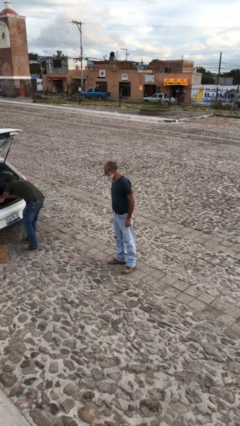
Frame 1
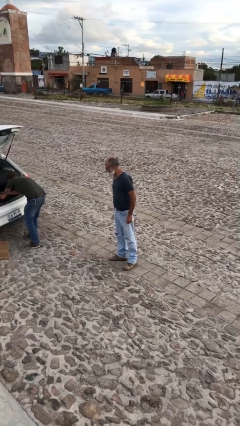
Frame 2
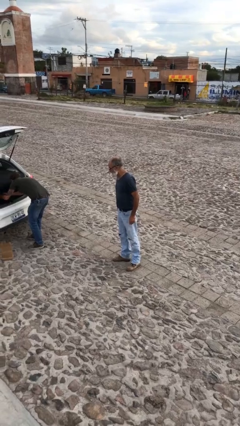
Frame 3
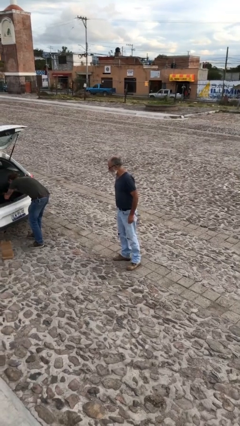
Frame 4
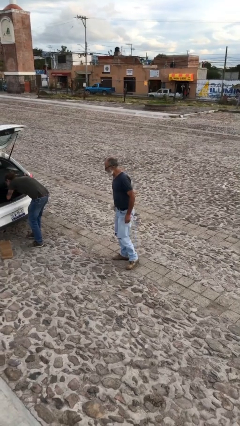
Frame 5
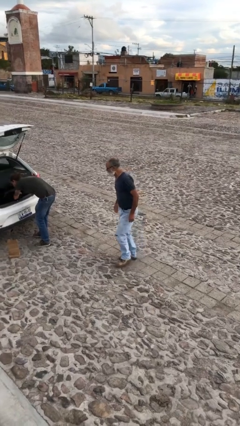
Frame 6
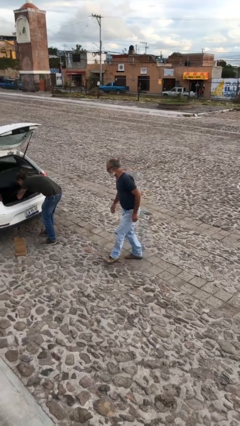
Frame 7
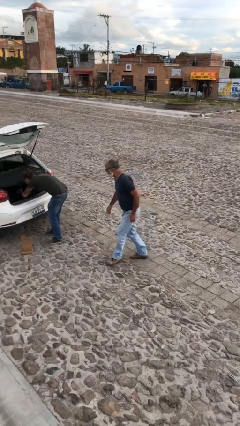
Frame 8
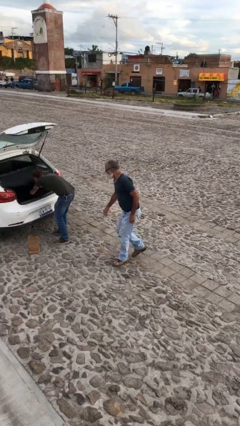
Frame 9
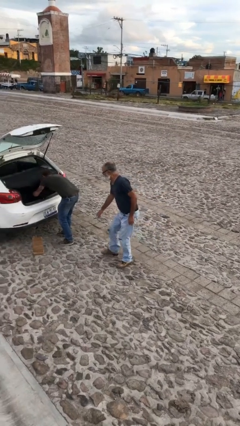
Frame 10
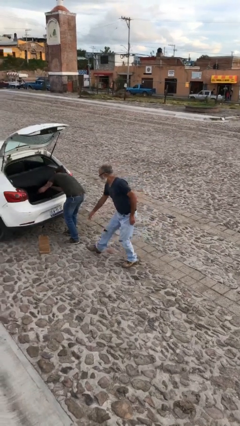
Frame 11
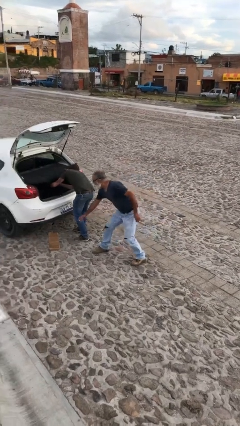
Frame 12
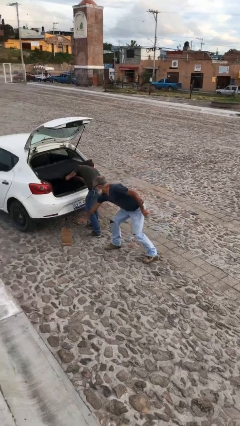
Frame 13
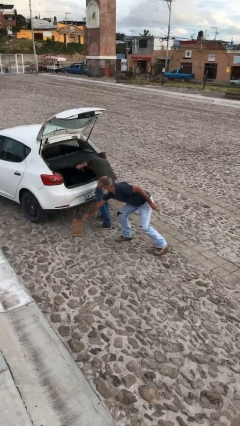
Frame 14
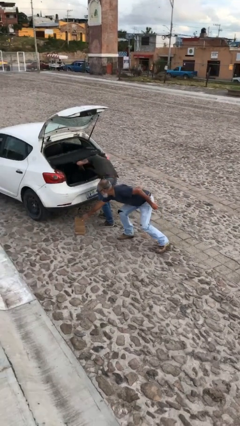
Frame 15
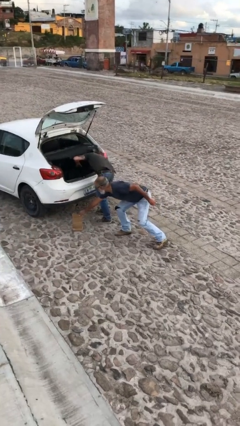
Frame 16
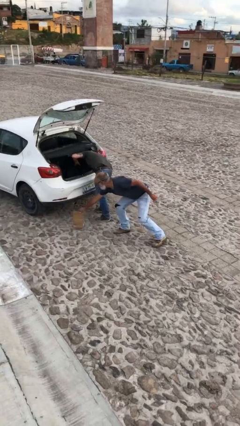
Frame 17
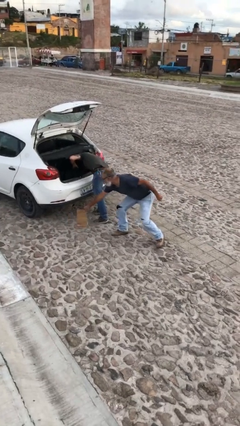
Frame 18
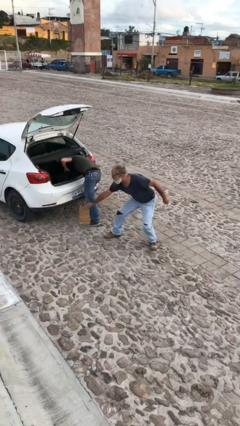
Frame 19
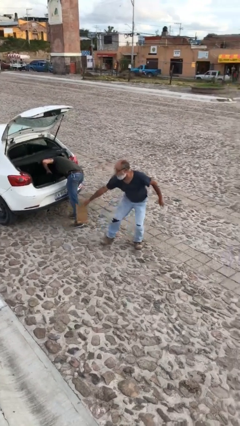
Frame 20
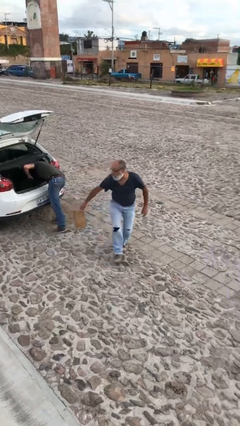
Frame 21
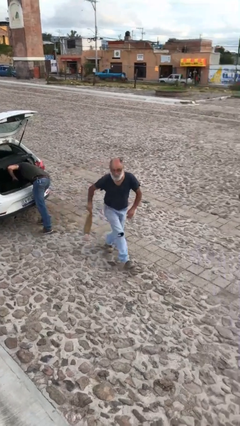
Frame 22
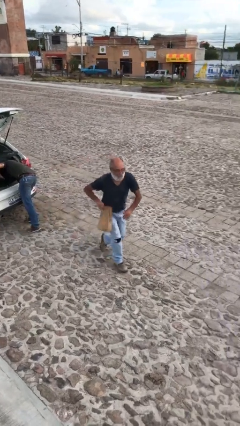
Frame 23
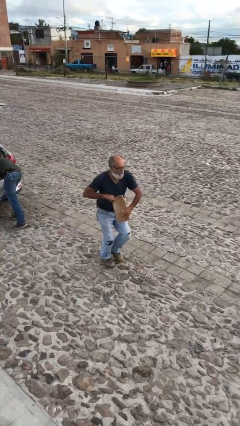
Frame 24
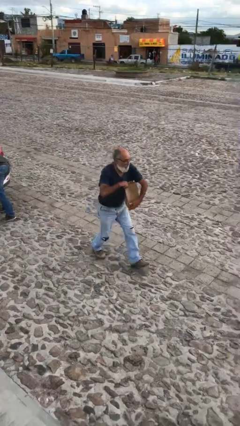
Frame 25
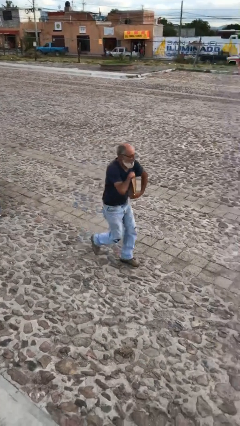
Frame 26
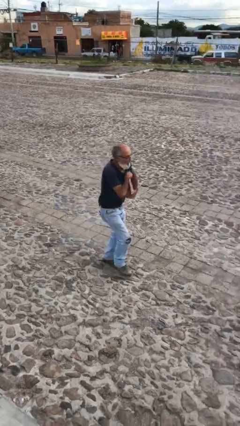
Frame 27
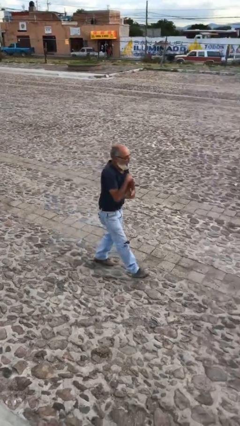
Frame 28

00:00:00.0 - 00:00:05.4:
person steals object from person

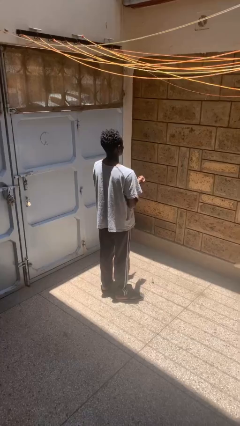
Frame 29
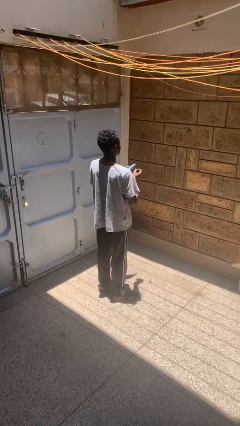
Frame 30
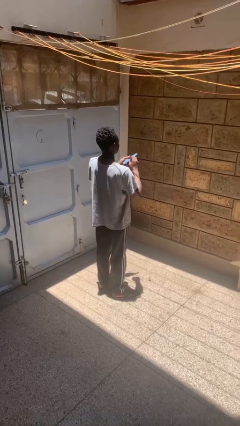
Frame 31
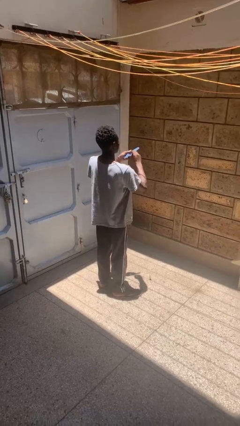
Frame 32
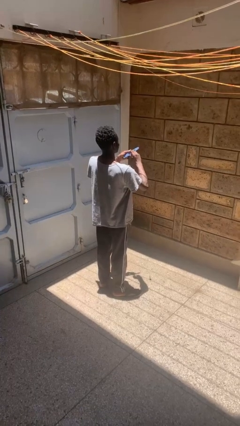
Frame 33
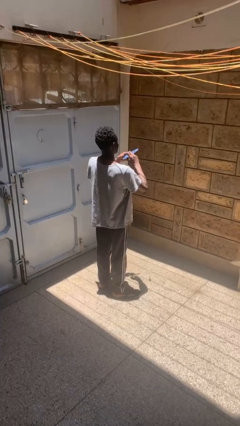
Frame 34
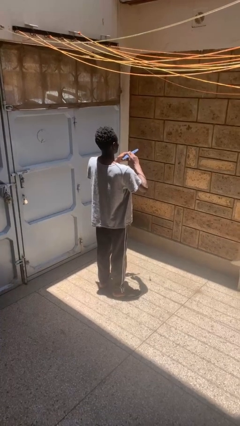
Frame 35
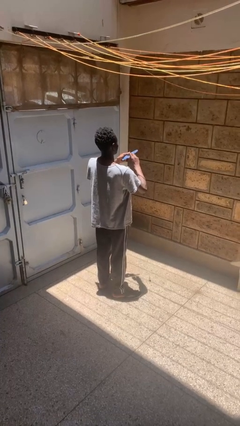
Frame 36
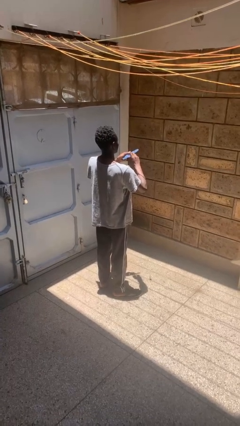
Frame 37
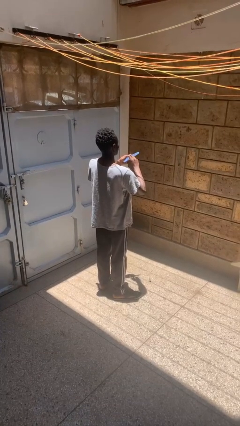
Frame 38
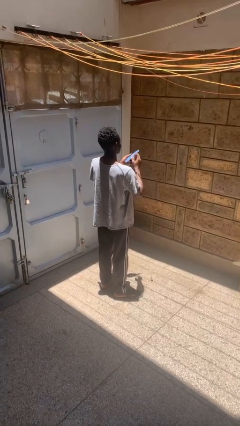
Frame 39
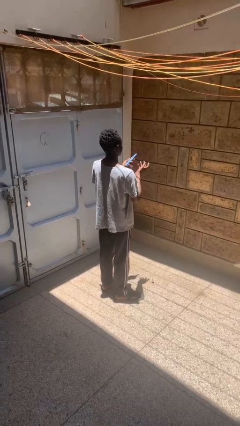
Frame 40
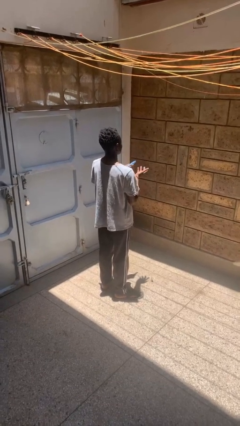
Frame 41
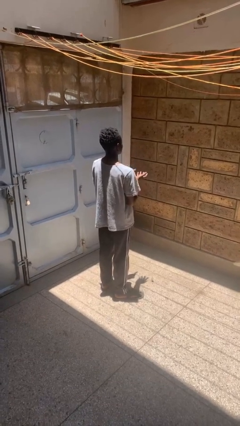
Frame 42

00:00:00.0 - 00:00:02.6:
person files fingernails

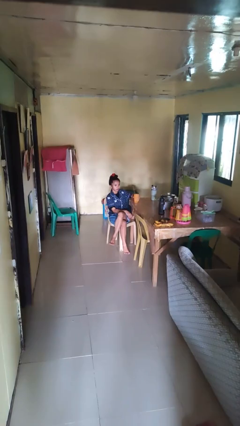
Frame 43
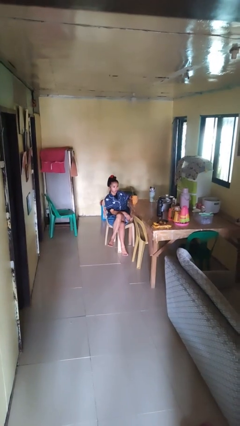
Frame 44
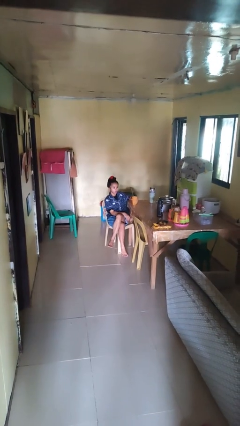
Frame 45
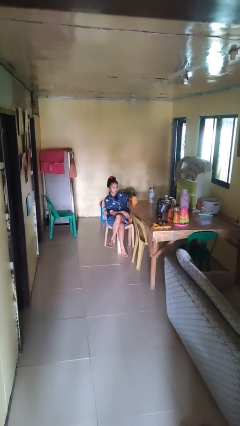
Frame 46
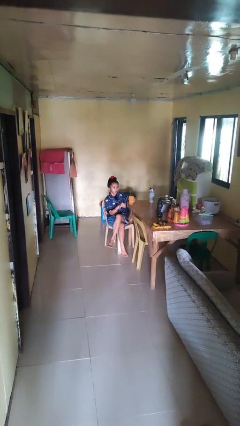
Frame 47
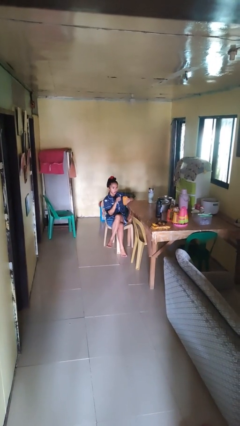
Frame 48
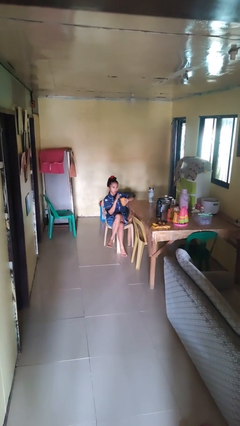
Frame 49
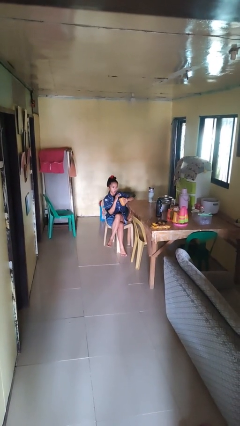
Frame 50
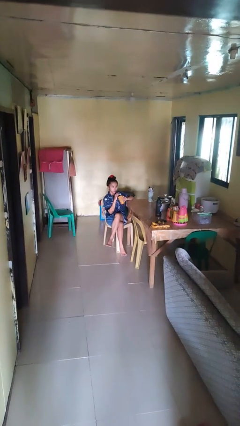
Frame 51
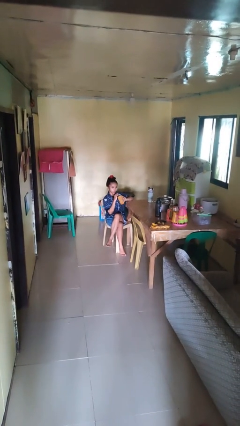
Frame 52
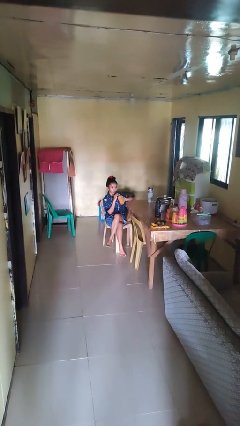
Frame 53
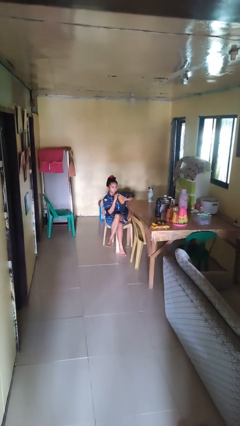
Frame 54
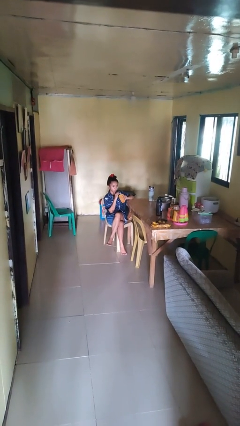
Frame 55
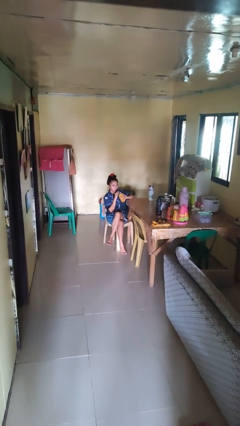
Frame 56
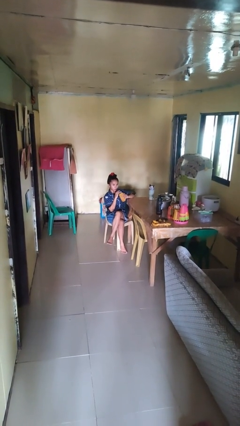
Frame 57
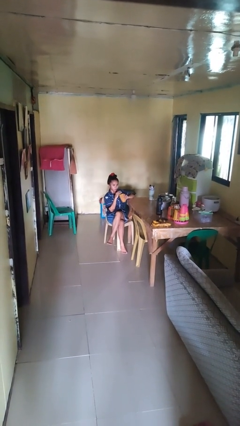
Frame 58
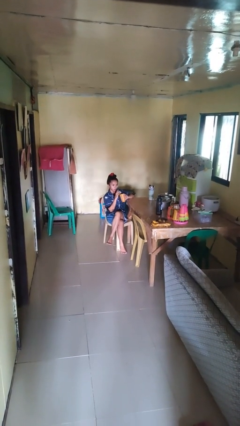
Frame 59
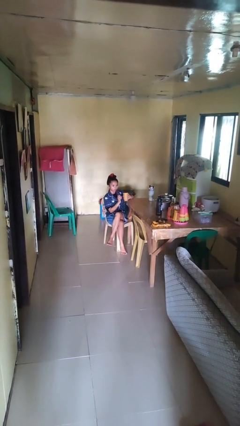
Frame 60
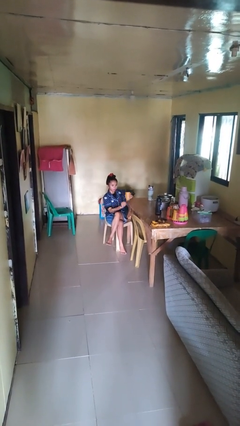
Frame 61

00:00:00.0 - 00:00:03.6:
person drinks from straw

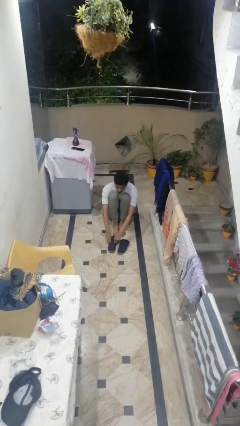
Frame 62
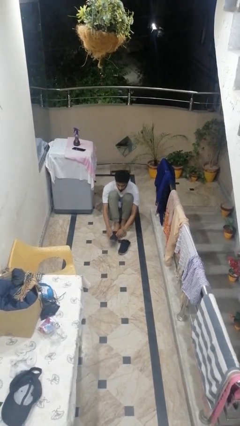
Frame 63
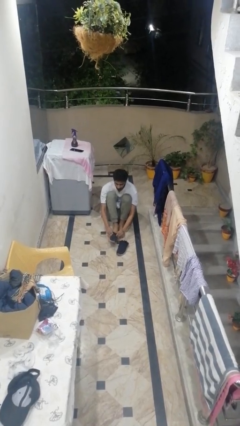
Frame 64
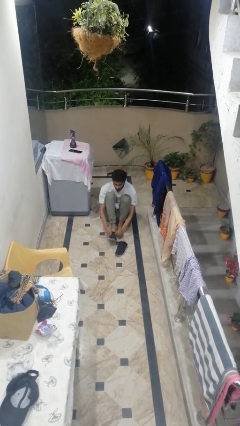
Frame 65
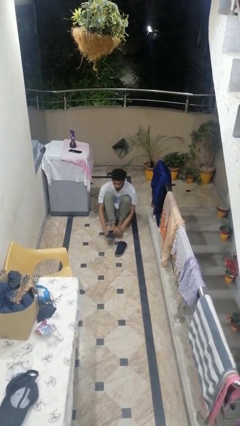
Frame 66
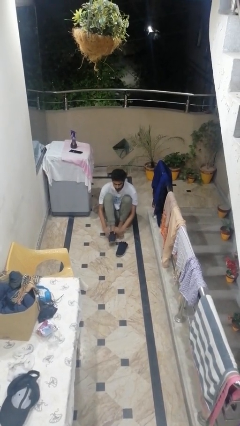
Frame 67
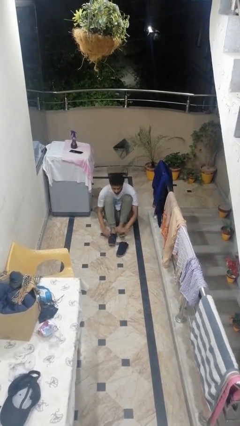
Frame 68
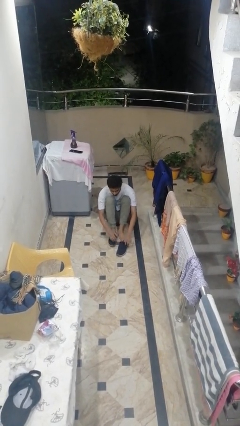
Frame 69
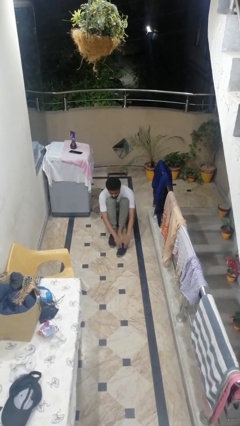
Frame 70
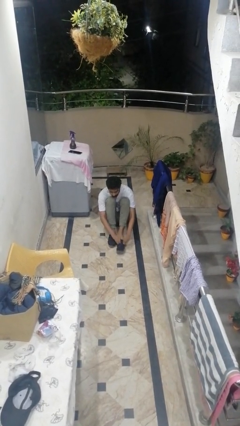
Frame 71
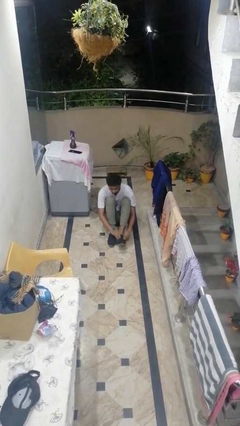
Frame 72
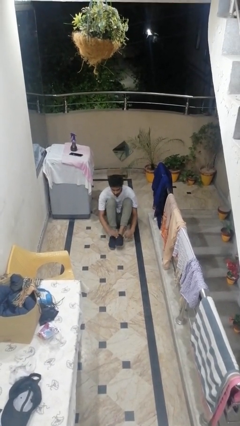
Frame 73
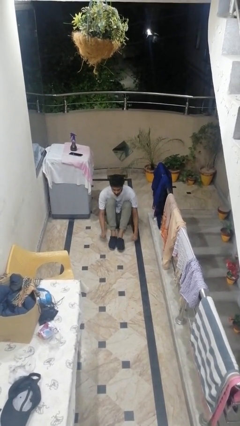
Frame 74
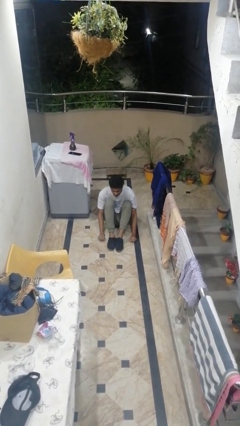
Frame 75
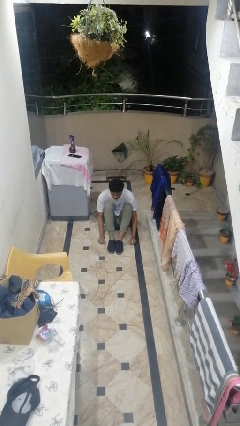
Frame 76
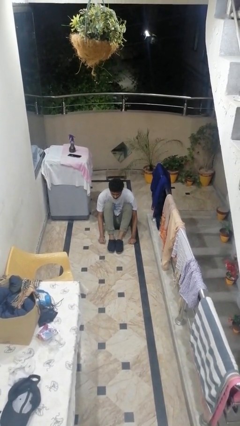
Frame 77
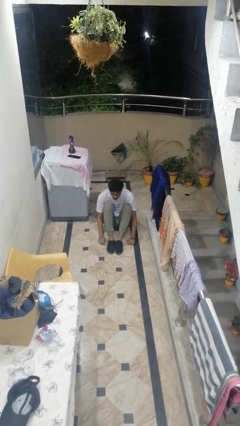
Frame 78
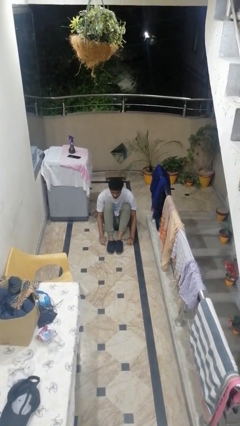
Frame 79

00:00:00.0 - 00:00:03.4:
person puts on shoes

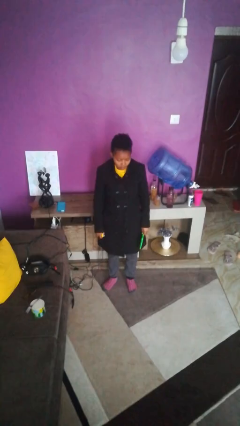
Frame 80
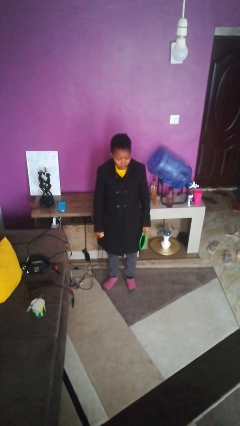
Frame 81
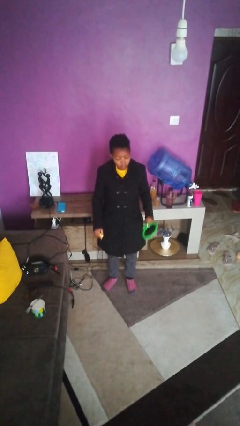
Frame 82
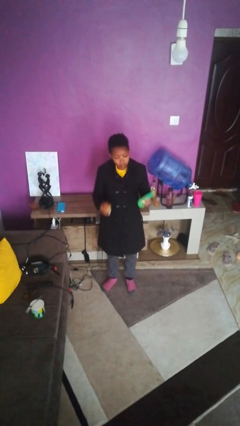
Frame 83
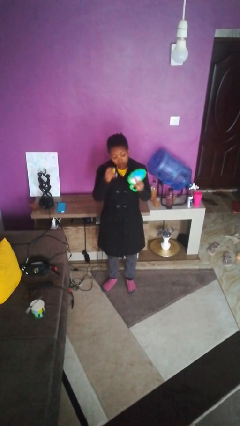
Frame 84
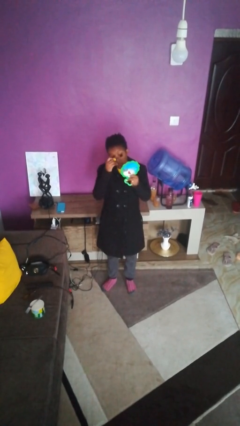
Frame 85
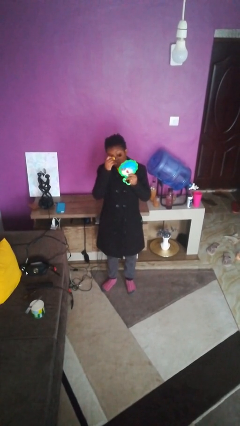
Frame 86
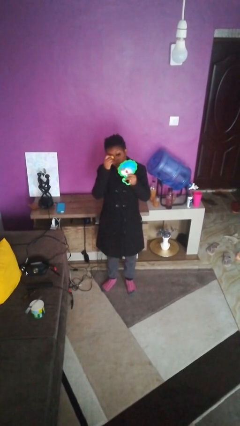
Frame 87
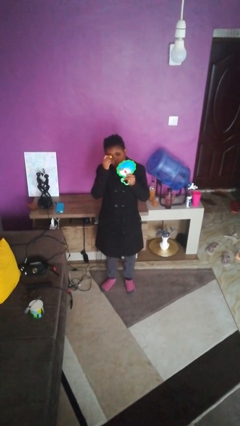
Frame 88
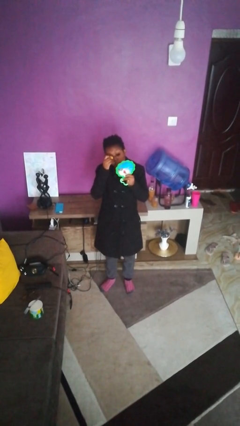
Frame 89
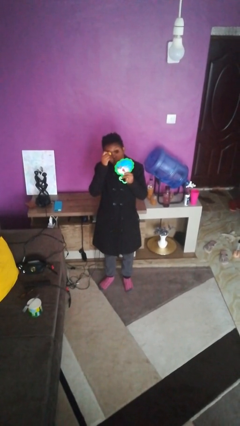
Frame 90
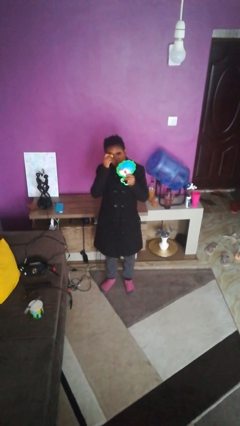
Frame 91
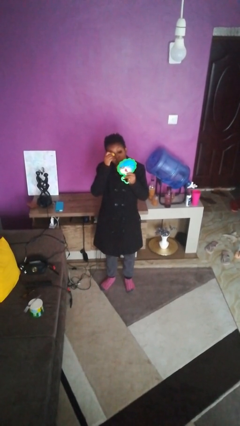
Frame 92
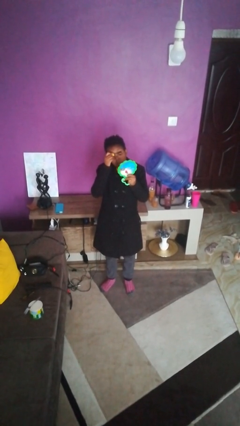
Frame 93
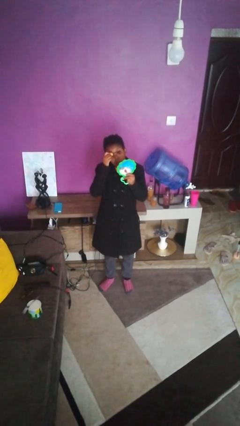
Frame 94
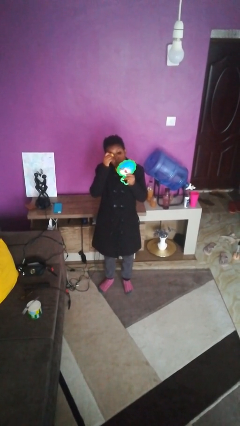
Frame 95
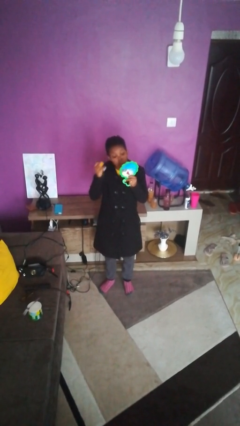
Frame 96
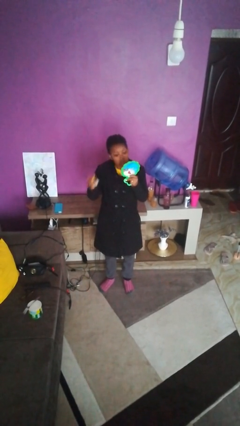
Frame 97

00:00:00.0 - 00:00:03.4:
person applies eye makeup
